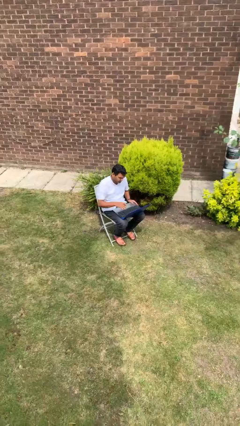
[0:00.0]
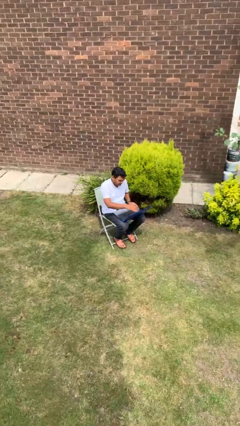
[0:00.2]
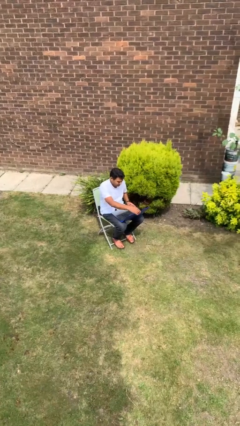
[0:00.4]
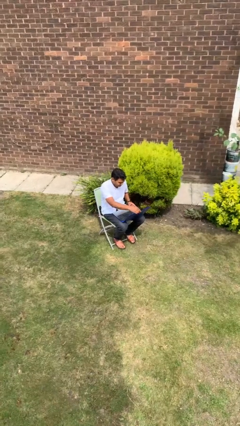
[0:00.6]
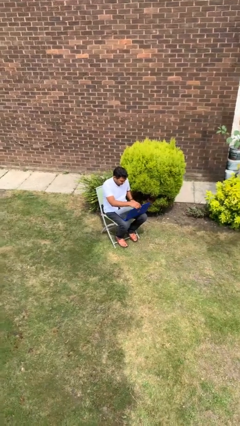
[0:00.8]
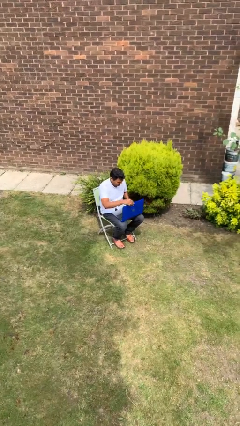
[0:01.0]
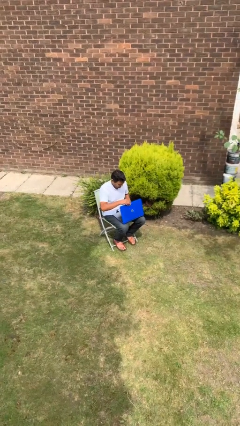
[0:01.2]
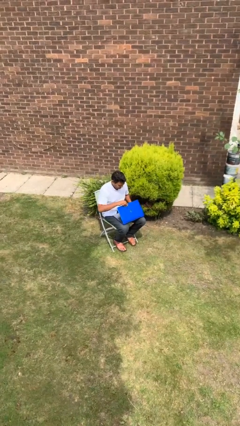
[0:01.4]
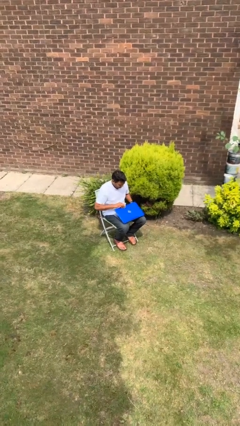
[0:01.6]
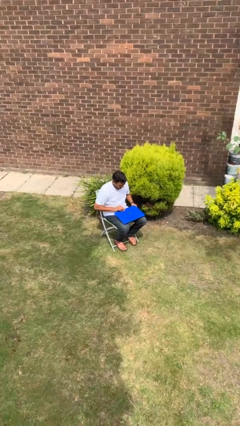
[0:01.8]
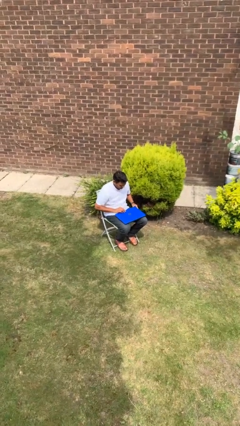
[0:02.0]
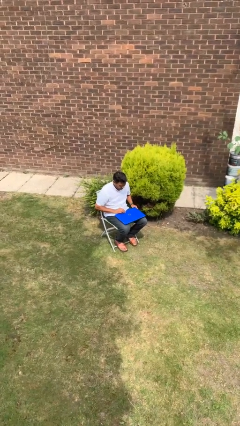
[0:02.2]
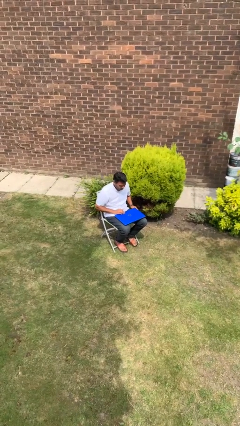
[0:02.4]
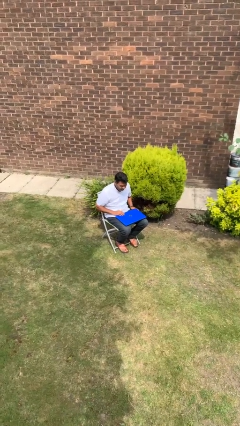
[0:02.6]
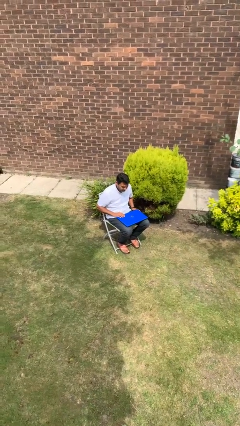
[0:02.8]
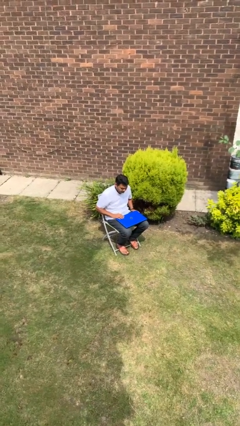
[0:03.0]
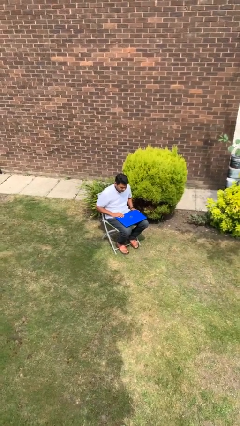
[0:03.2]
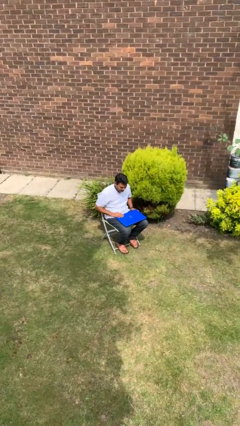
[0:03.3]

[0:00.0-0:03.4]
person closes laptop

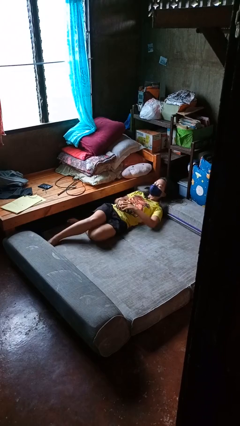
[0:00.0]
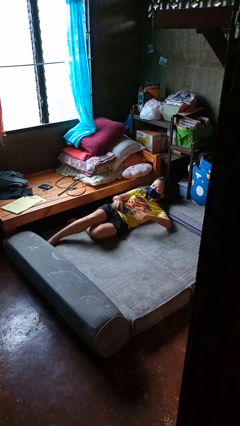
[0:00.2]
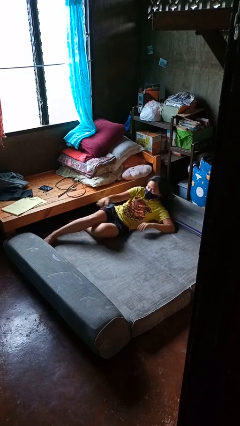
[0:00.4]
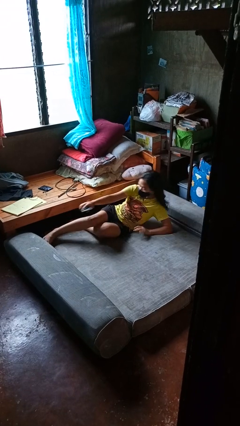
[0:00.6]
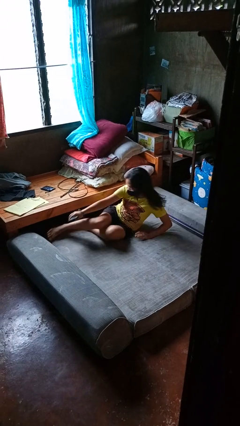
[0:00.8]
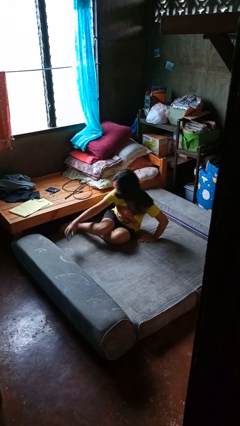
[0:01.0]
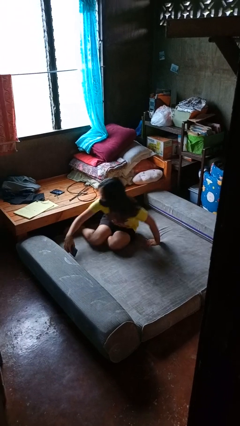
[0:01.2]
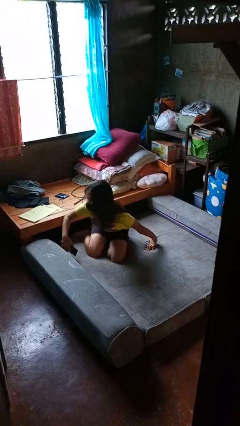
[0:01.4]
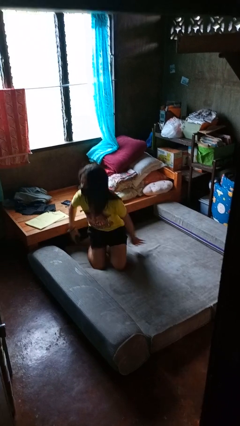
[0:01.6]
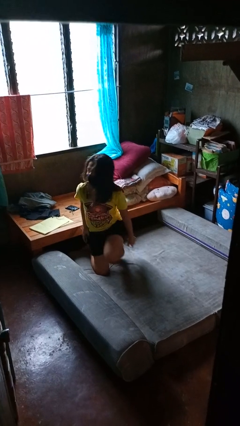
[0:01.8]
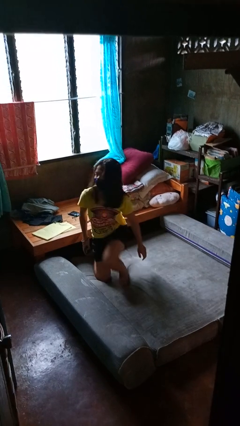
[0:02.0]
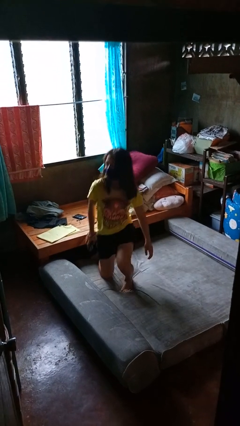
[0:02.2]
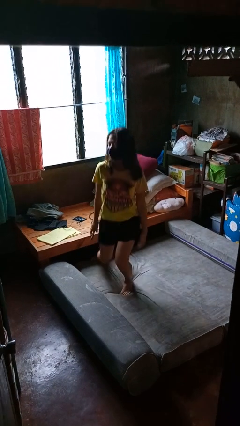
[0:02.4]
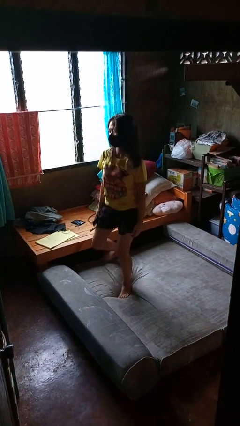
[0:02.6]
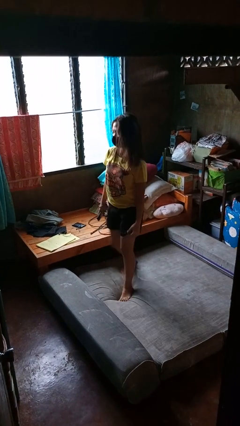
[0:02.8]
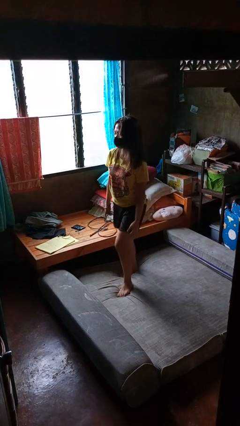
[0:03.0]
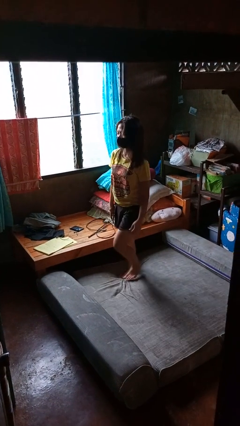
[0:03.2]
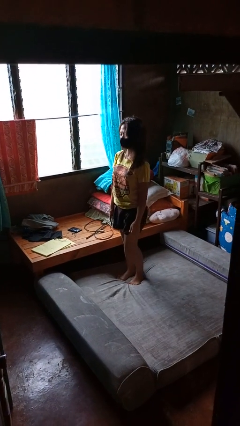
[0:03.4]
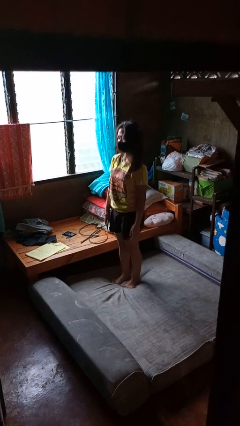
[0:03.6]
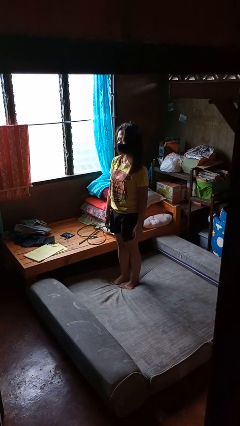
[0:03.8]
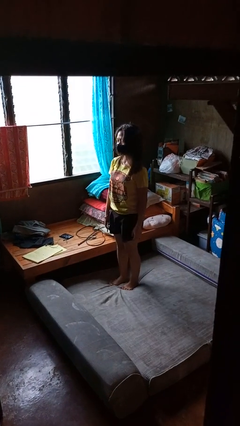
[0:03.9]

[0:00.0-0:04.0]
person stands up

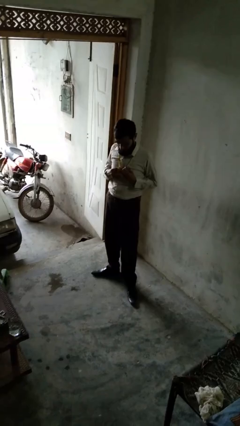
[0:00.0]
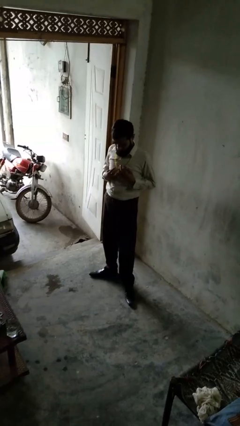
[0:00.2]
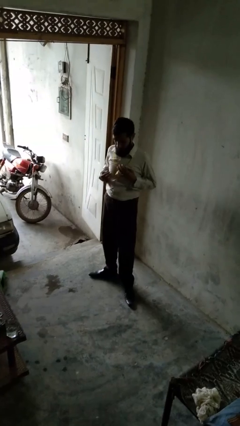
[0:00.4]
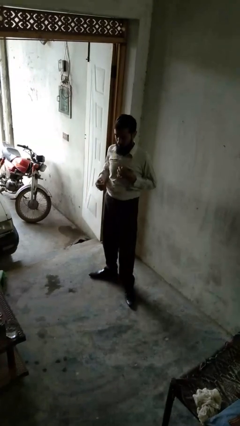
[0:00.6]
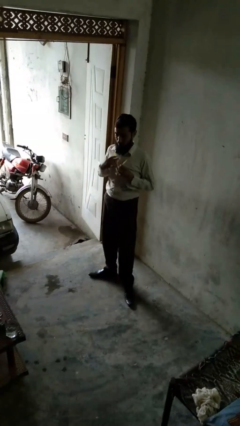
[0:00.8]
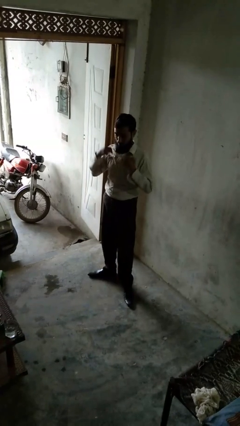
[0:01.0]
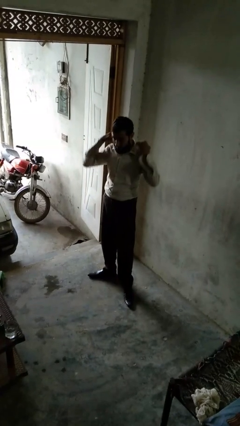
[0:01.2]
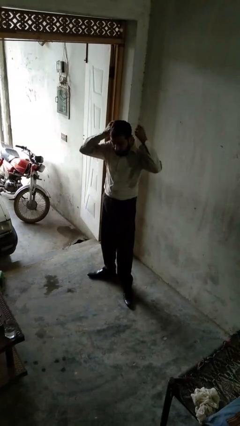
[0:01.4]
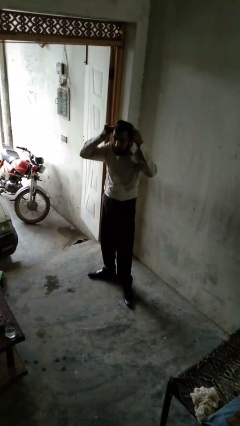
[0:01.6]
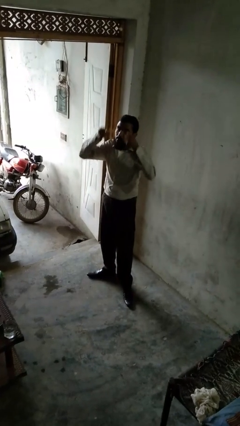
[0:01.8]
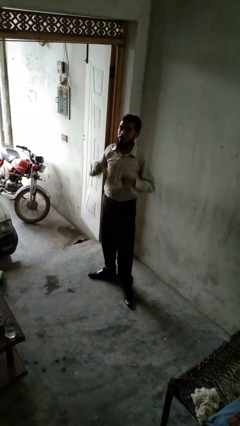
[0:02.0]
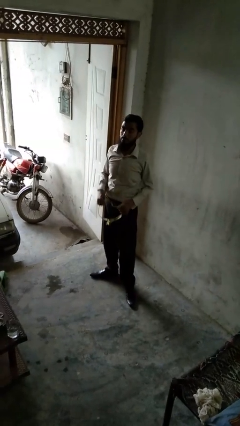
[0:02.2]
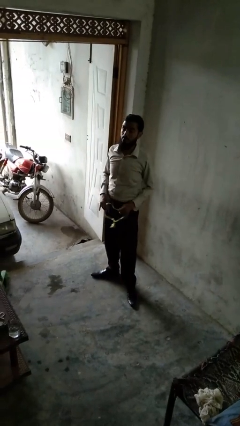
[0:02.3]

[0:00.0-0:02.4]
person takes off necklace

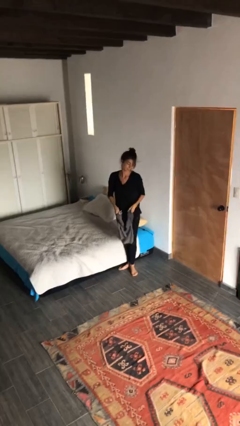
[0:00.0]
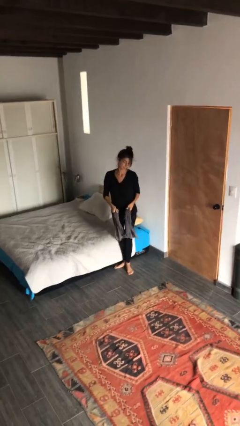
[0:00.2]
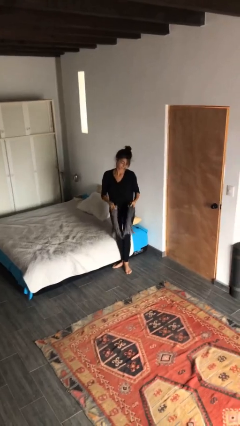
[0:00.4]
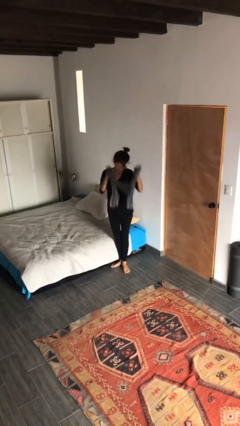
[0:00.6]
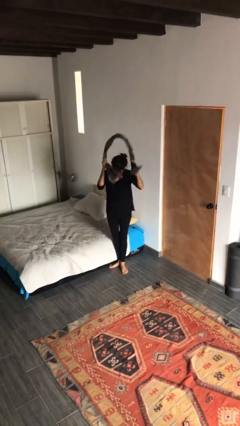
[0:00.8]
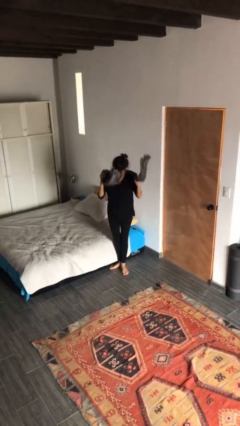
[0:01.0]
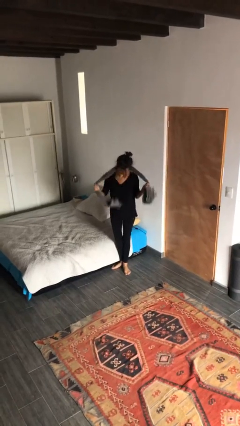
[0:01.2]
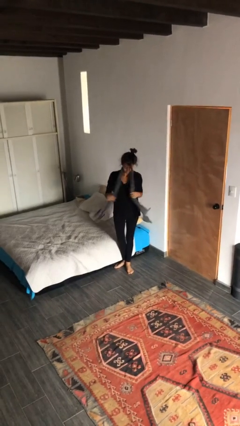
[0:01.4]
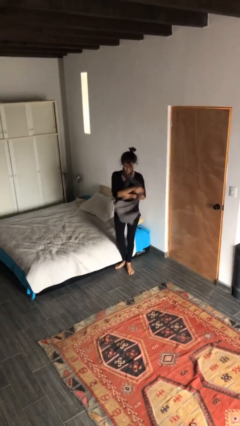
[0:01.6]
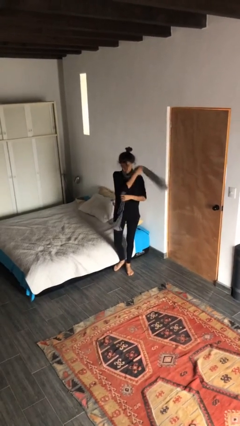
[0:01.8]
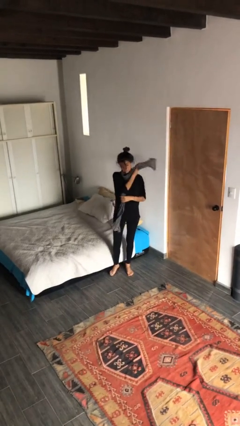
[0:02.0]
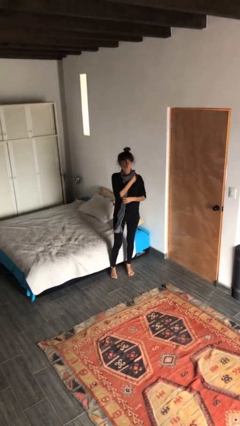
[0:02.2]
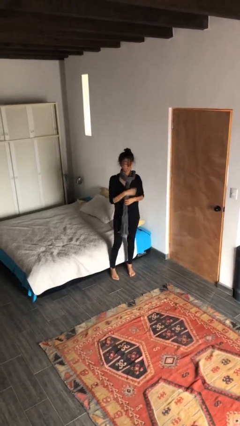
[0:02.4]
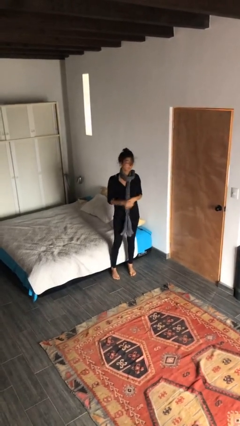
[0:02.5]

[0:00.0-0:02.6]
person puts on scarf

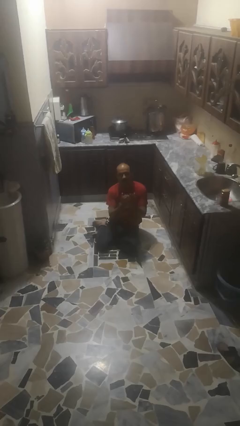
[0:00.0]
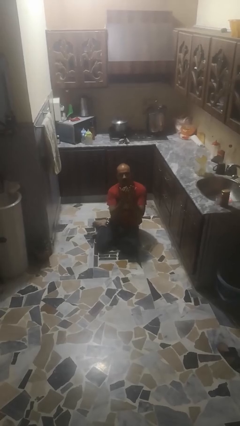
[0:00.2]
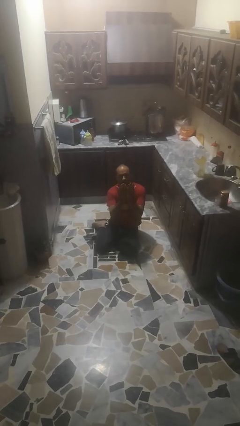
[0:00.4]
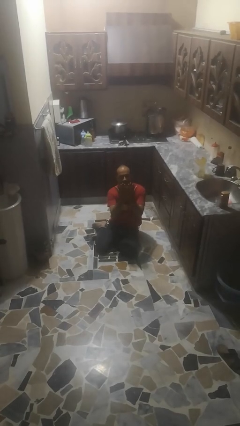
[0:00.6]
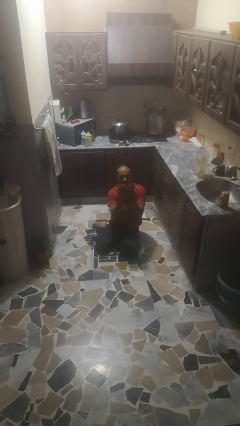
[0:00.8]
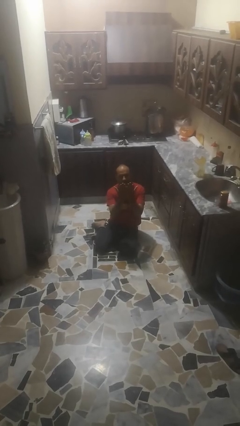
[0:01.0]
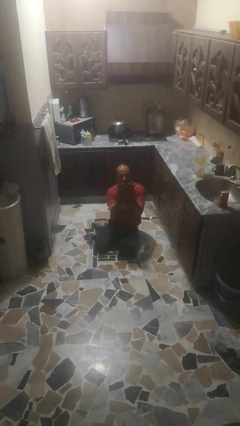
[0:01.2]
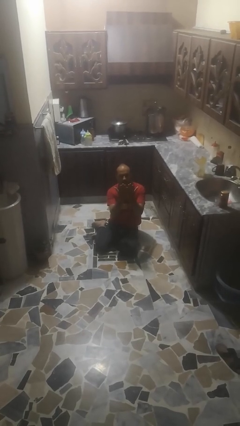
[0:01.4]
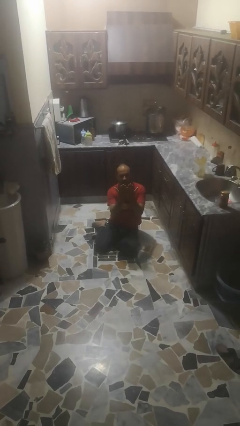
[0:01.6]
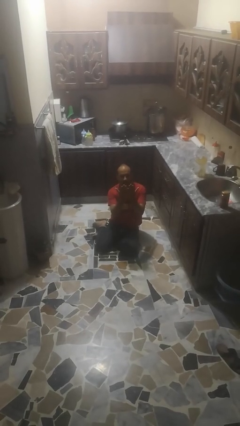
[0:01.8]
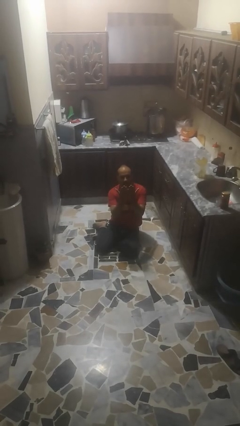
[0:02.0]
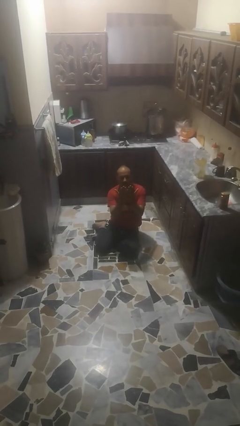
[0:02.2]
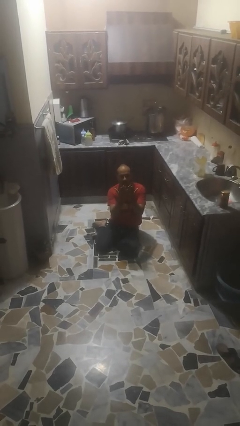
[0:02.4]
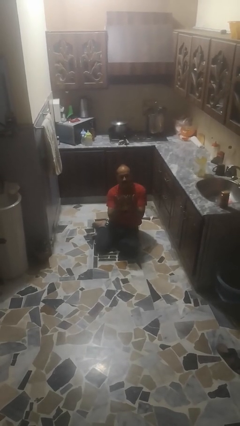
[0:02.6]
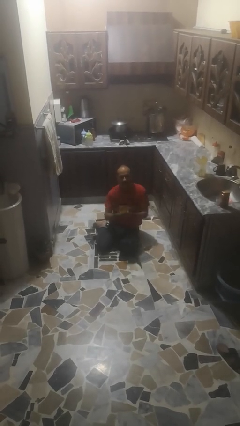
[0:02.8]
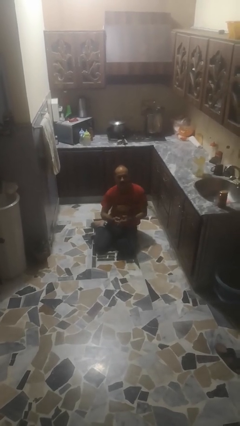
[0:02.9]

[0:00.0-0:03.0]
person prays

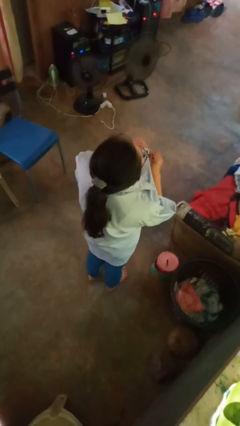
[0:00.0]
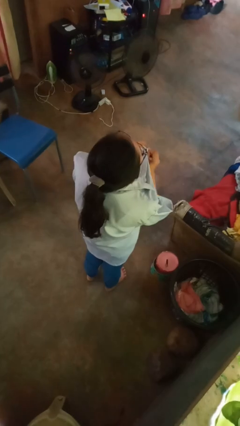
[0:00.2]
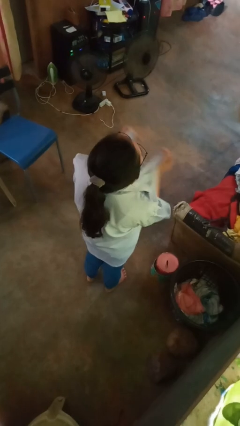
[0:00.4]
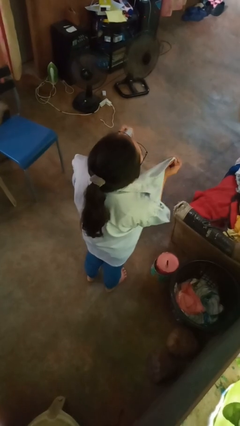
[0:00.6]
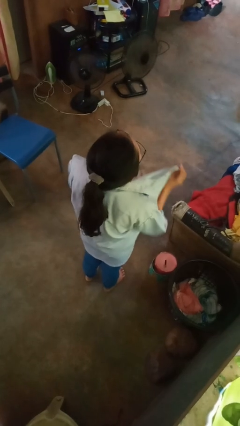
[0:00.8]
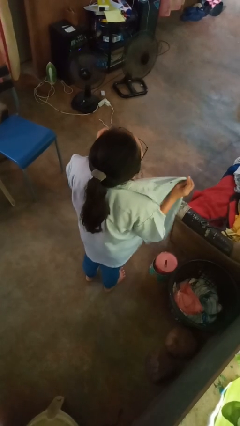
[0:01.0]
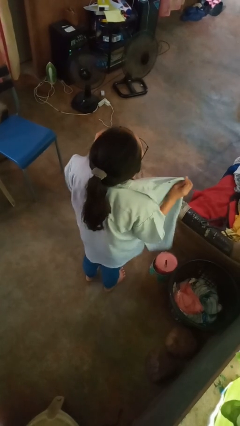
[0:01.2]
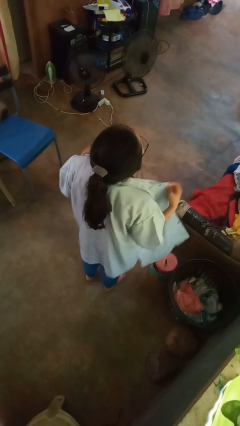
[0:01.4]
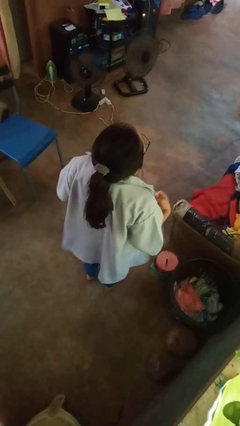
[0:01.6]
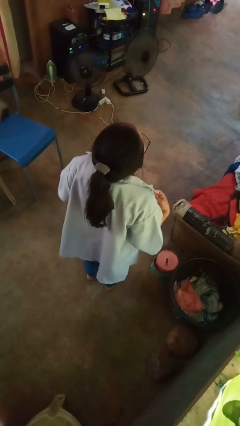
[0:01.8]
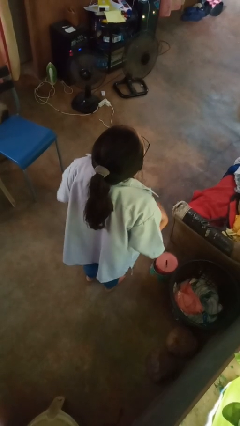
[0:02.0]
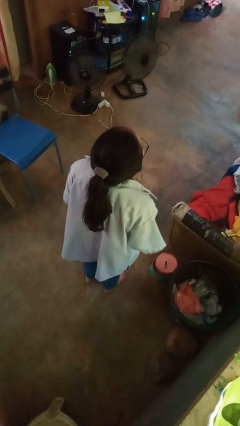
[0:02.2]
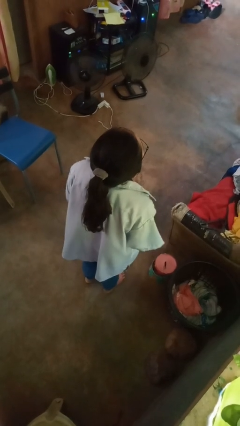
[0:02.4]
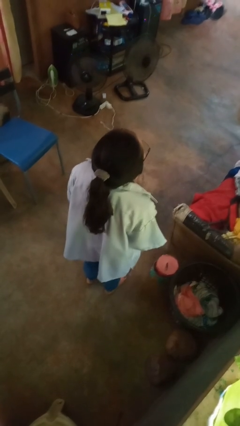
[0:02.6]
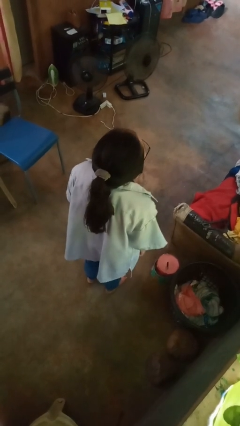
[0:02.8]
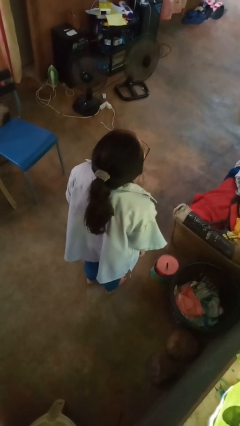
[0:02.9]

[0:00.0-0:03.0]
person unbuttons shirt
